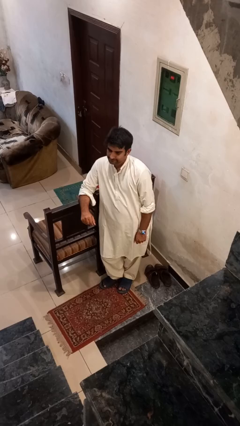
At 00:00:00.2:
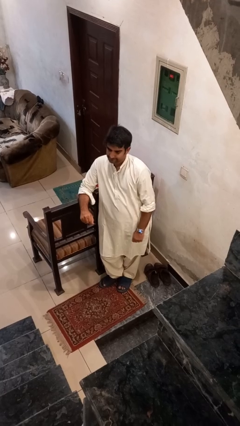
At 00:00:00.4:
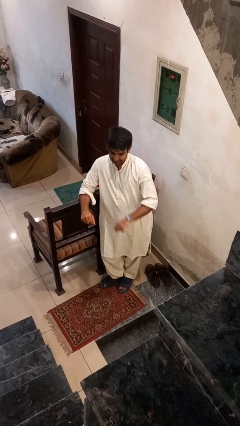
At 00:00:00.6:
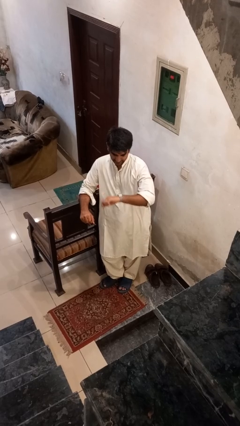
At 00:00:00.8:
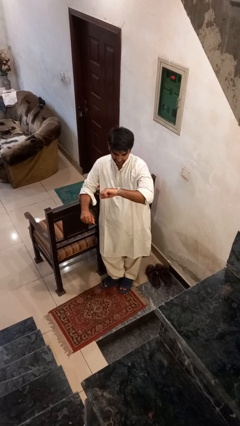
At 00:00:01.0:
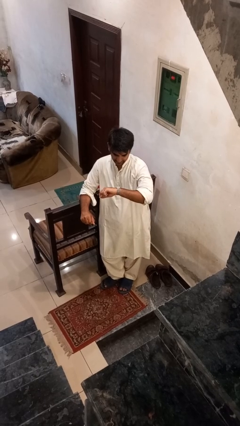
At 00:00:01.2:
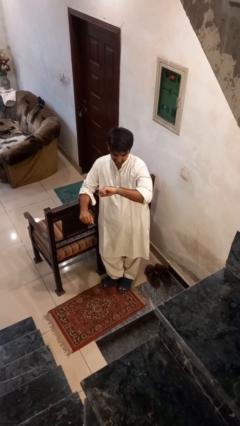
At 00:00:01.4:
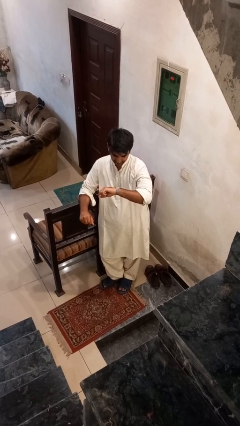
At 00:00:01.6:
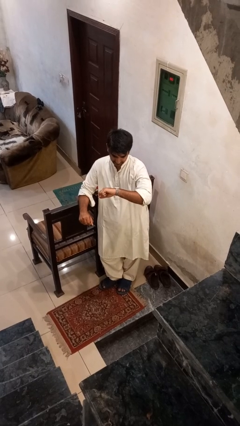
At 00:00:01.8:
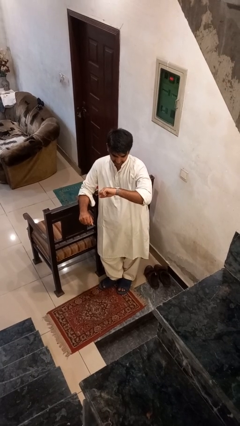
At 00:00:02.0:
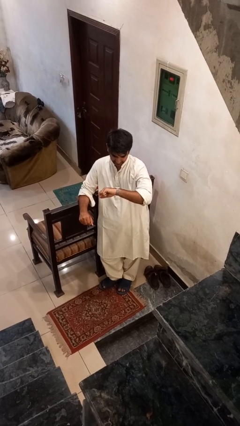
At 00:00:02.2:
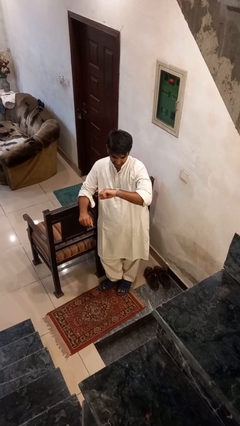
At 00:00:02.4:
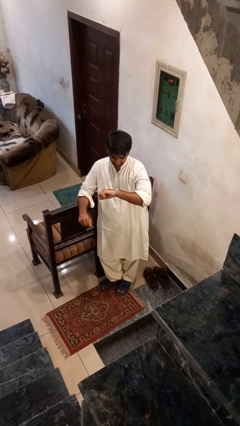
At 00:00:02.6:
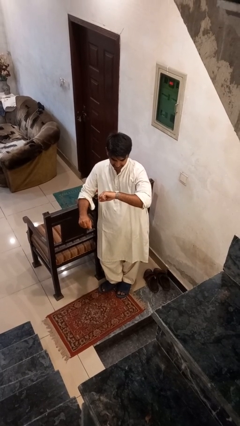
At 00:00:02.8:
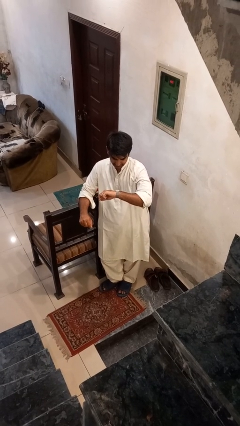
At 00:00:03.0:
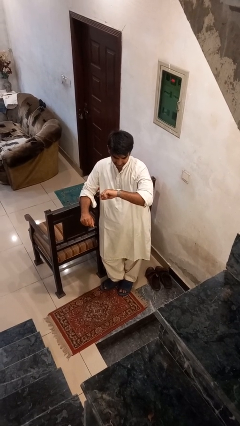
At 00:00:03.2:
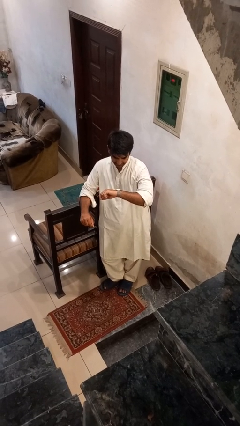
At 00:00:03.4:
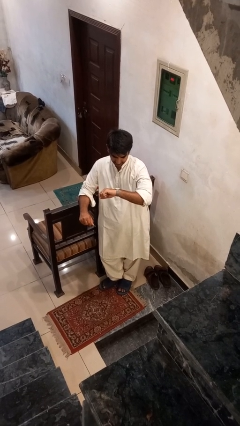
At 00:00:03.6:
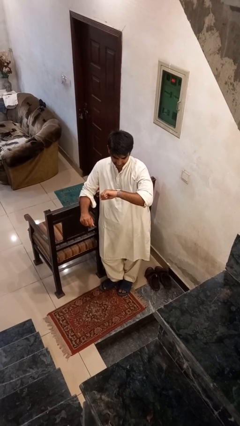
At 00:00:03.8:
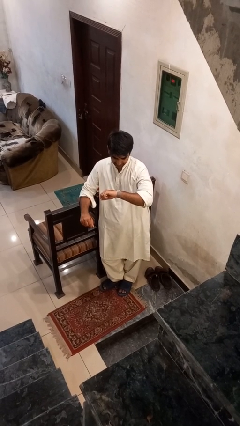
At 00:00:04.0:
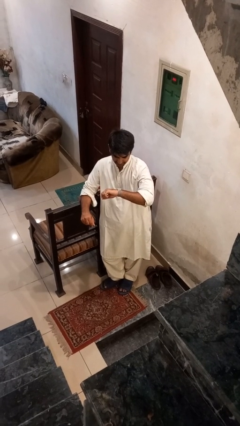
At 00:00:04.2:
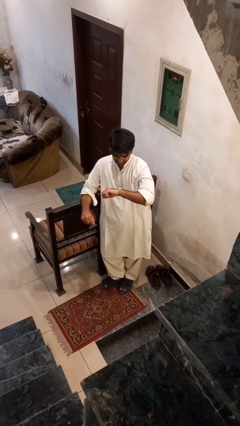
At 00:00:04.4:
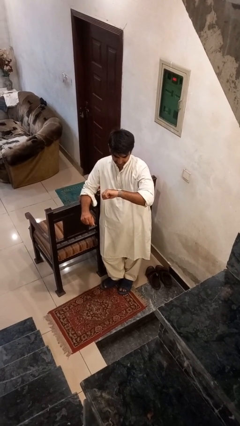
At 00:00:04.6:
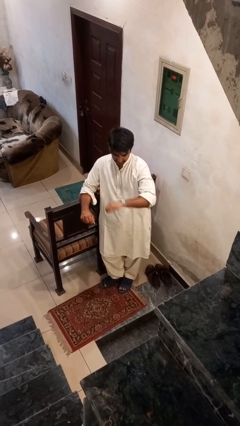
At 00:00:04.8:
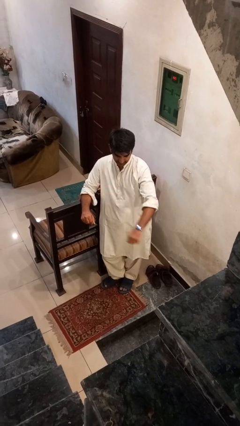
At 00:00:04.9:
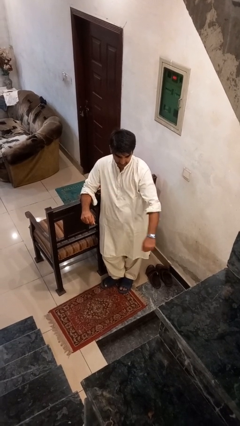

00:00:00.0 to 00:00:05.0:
person looks at wristwatch

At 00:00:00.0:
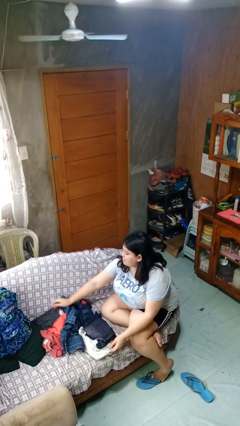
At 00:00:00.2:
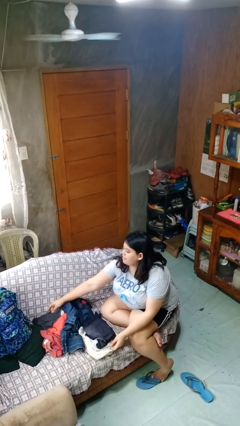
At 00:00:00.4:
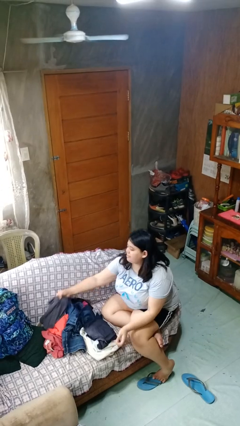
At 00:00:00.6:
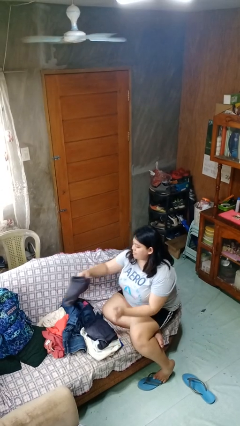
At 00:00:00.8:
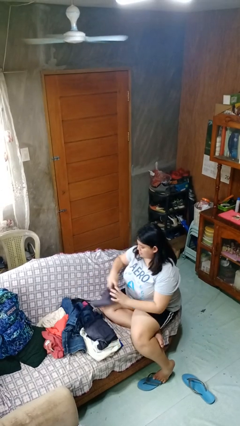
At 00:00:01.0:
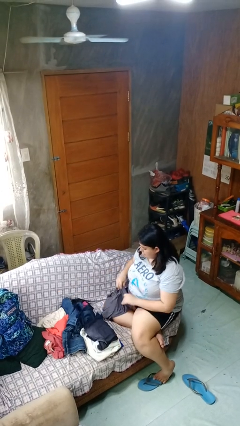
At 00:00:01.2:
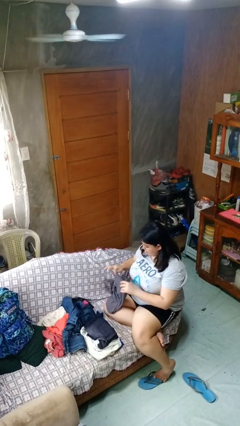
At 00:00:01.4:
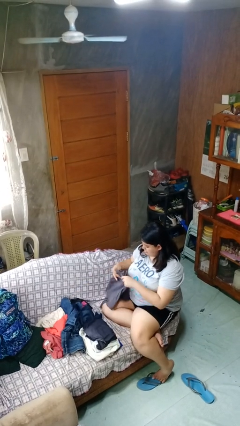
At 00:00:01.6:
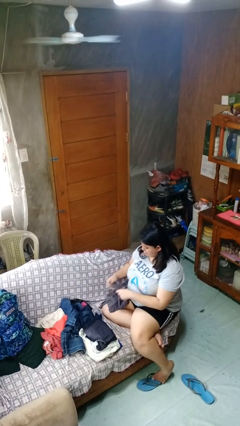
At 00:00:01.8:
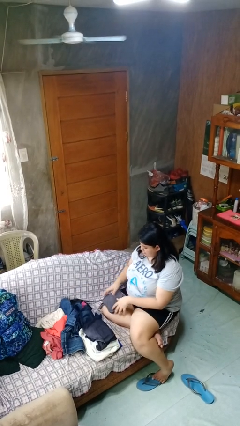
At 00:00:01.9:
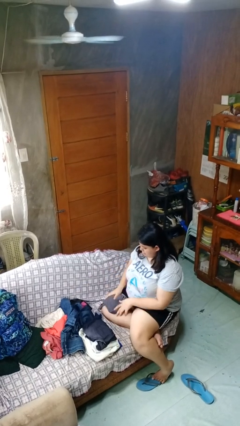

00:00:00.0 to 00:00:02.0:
person folds shirt

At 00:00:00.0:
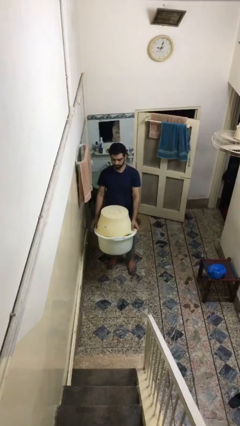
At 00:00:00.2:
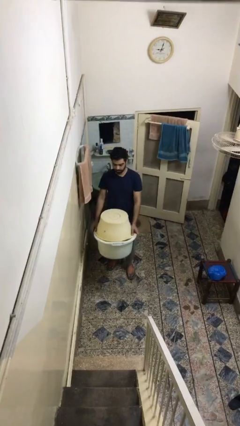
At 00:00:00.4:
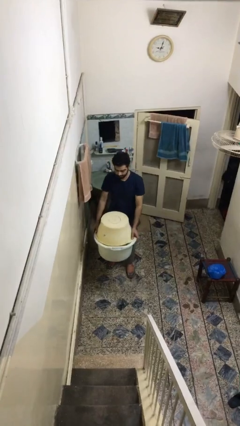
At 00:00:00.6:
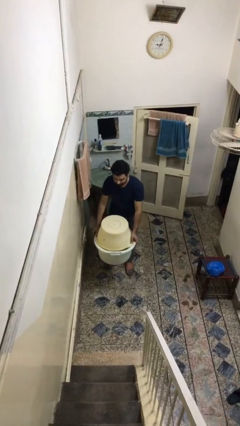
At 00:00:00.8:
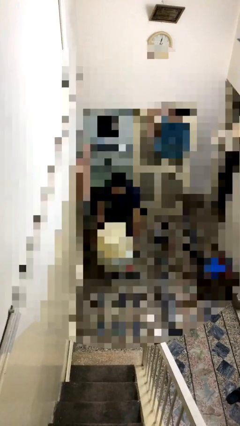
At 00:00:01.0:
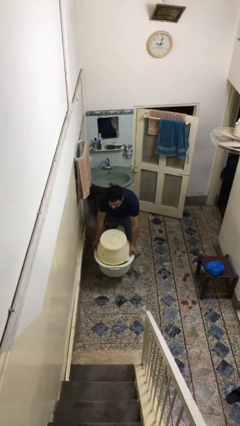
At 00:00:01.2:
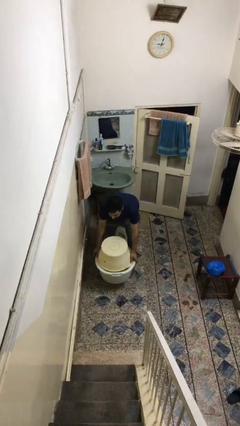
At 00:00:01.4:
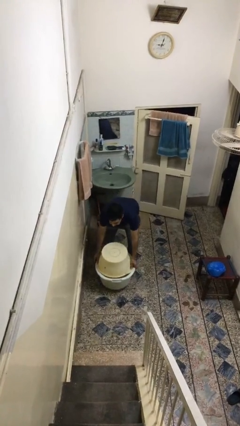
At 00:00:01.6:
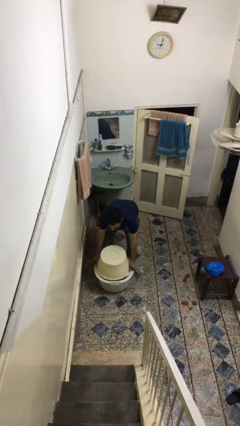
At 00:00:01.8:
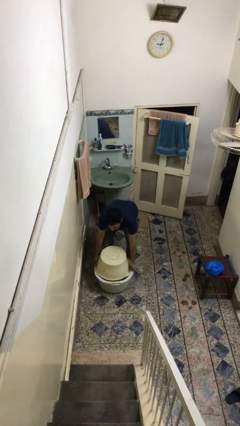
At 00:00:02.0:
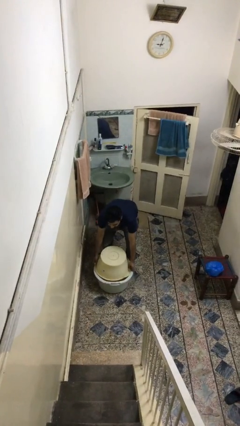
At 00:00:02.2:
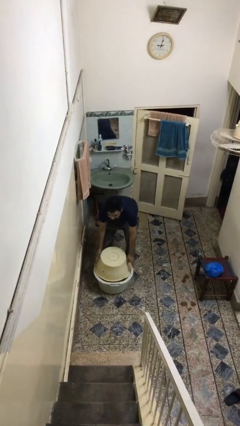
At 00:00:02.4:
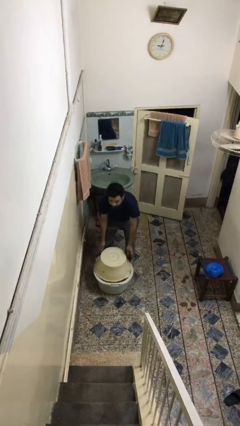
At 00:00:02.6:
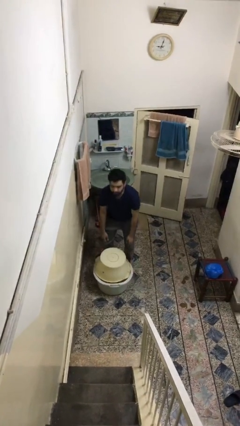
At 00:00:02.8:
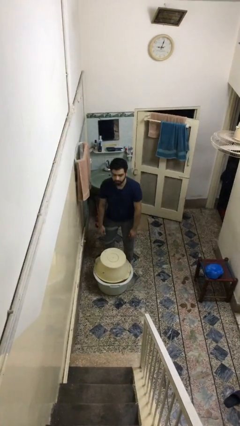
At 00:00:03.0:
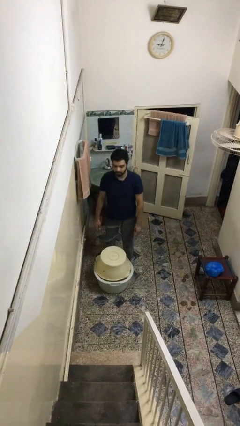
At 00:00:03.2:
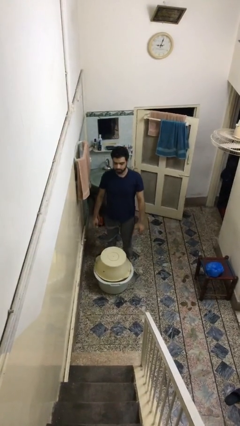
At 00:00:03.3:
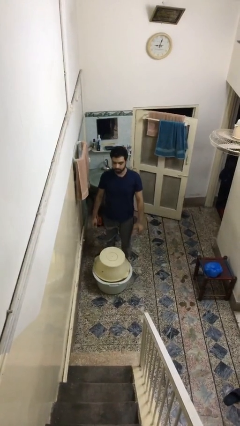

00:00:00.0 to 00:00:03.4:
person puts down object on floor

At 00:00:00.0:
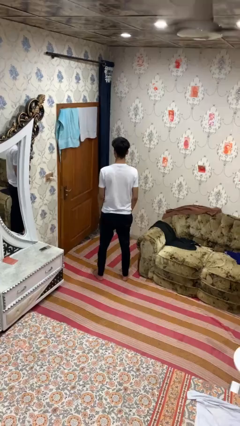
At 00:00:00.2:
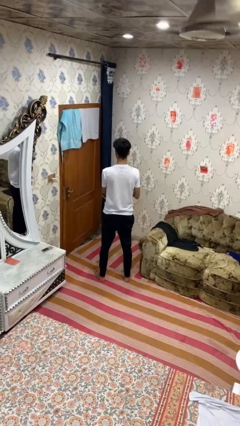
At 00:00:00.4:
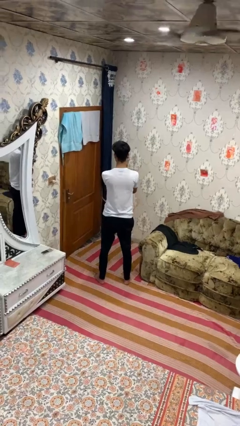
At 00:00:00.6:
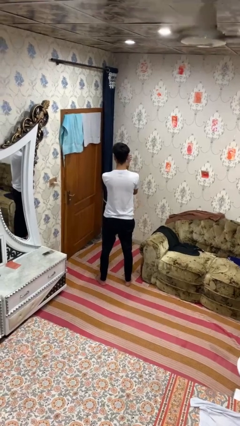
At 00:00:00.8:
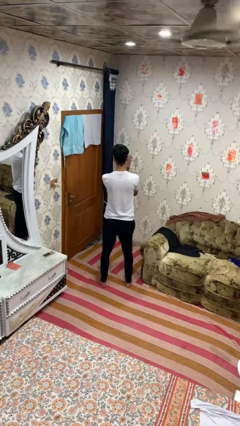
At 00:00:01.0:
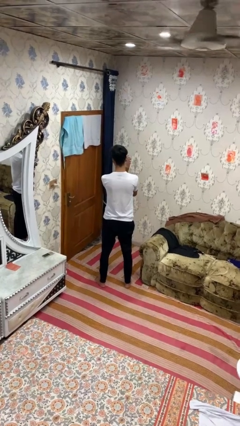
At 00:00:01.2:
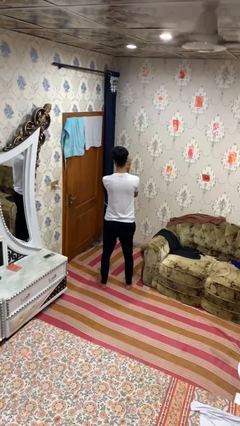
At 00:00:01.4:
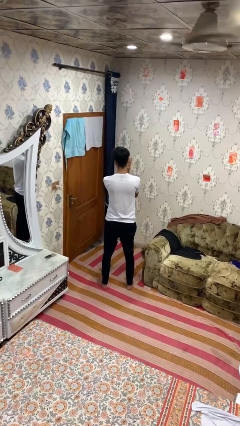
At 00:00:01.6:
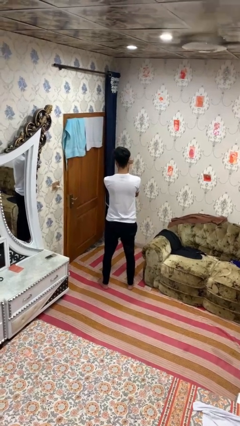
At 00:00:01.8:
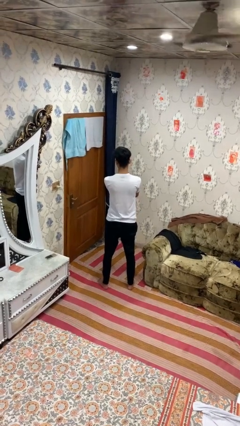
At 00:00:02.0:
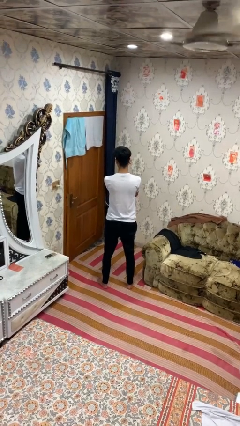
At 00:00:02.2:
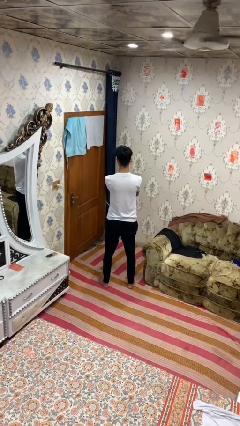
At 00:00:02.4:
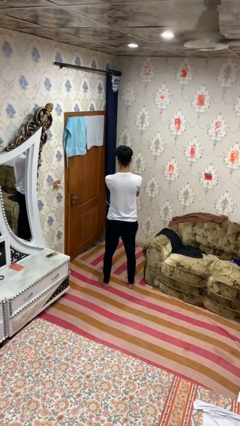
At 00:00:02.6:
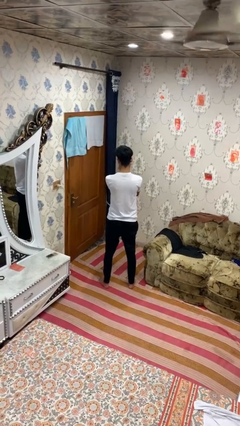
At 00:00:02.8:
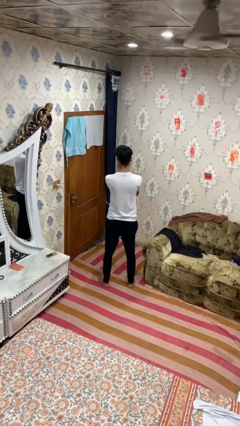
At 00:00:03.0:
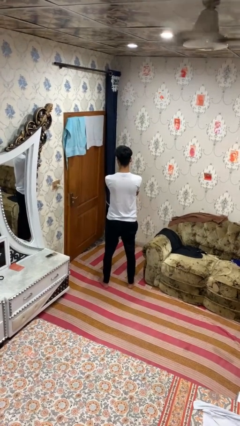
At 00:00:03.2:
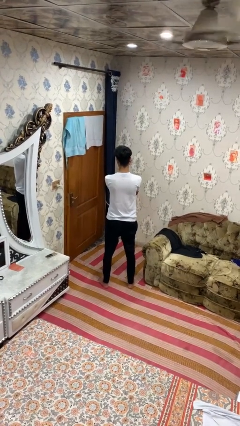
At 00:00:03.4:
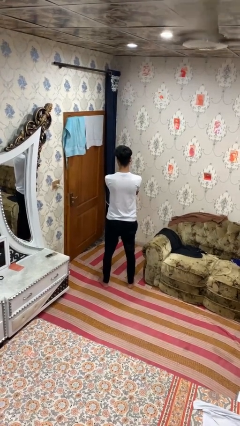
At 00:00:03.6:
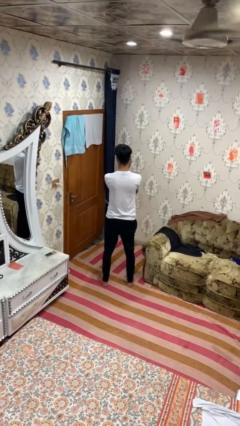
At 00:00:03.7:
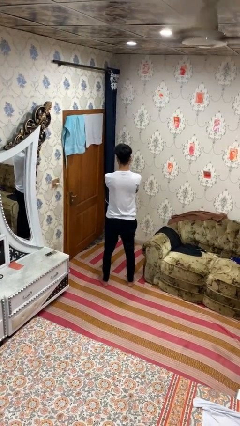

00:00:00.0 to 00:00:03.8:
person claps hands

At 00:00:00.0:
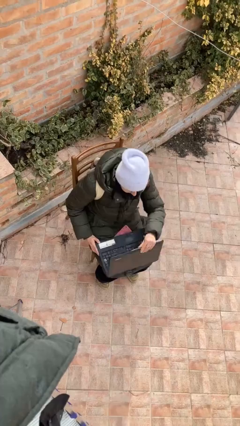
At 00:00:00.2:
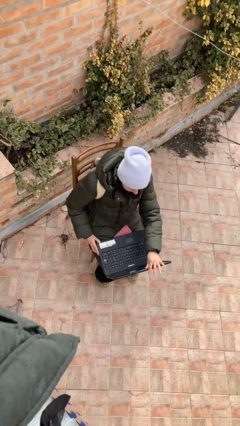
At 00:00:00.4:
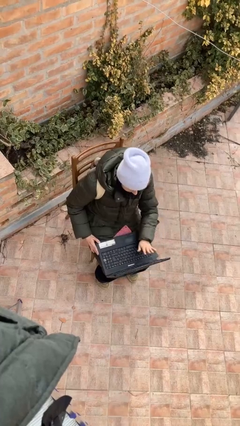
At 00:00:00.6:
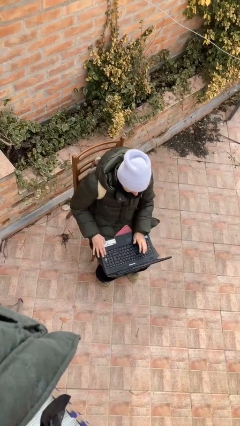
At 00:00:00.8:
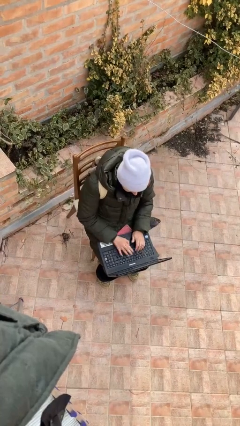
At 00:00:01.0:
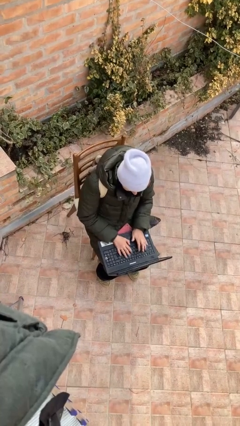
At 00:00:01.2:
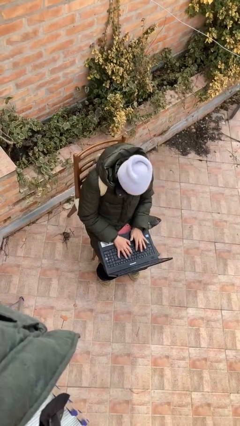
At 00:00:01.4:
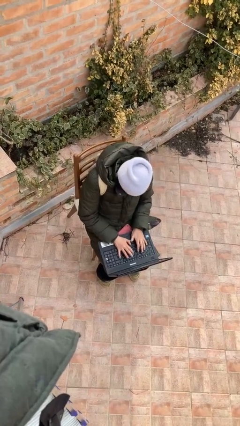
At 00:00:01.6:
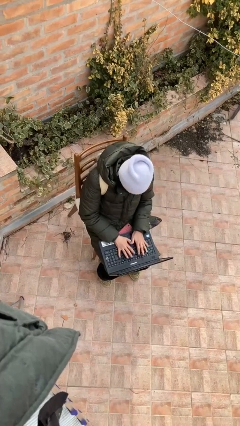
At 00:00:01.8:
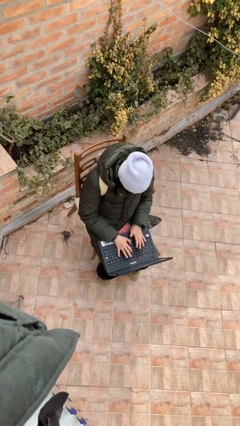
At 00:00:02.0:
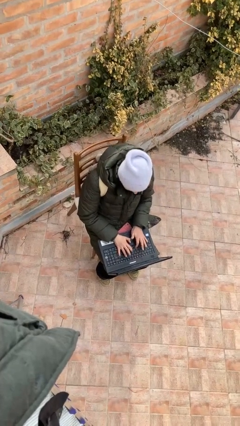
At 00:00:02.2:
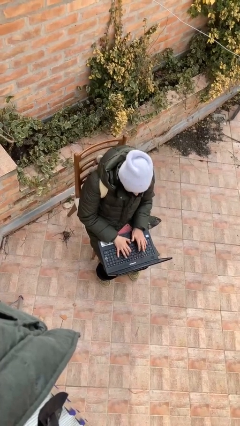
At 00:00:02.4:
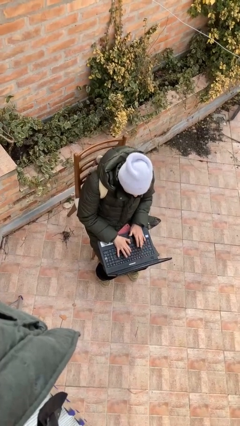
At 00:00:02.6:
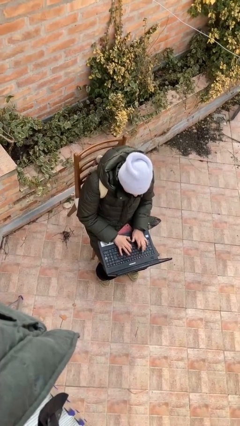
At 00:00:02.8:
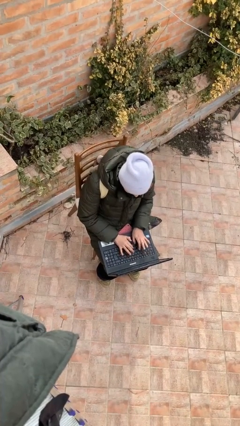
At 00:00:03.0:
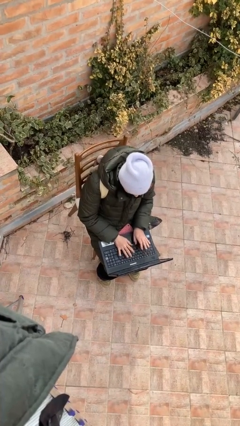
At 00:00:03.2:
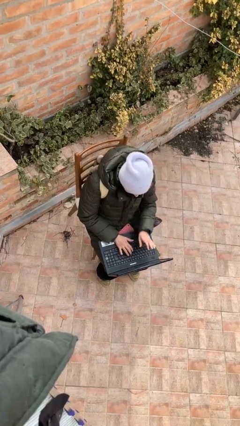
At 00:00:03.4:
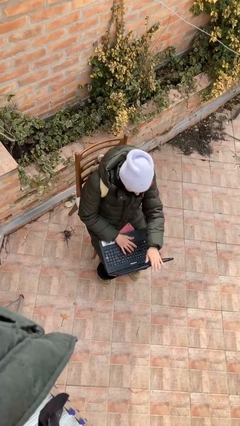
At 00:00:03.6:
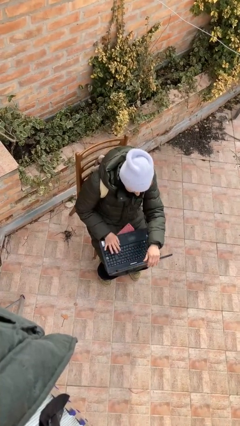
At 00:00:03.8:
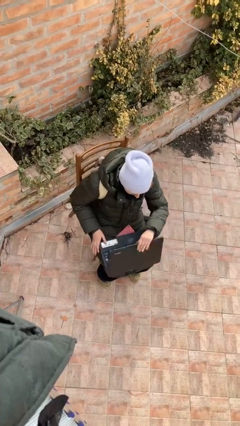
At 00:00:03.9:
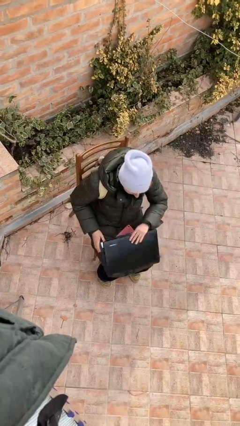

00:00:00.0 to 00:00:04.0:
person interacts with laptop
